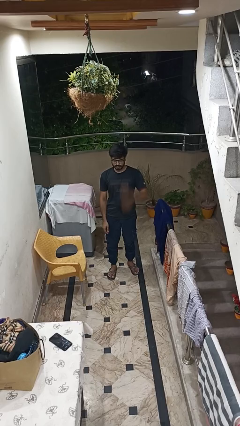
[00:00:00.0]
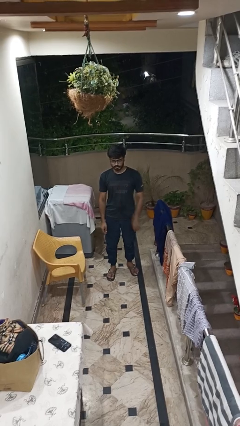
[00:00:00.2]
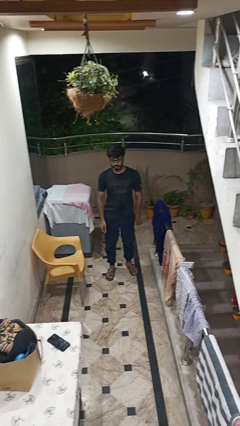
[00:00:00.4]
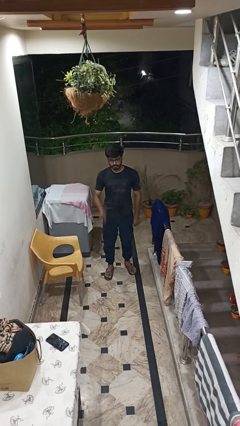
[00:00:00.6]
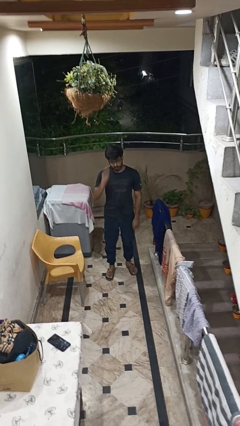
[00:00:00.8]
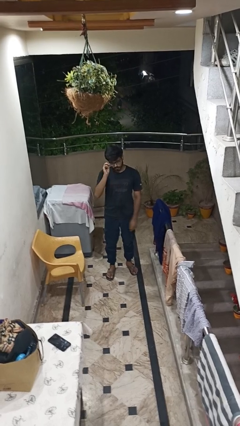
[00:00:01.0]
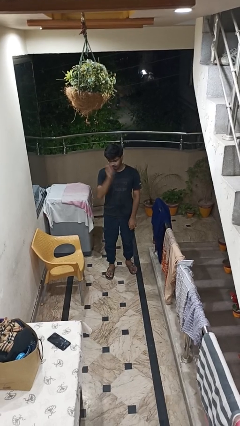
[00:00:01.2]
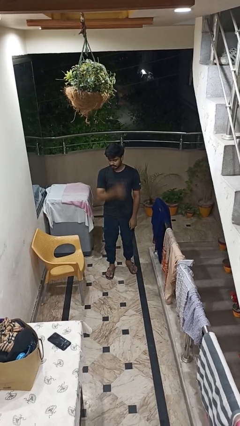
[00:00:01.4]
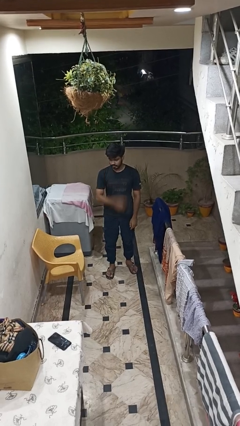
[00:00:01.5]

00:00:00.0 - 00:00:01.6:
person takes off glasses

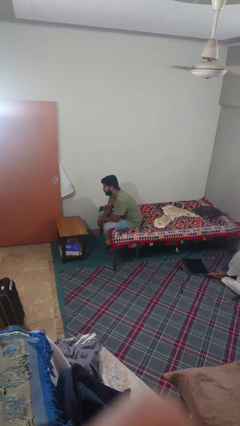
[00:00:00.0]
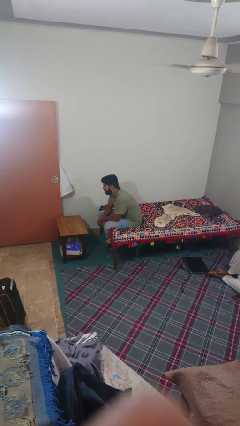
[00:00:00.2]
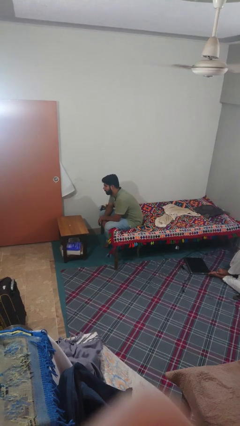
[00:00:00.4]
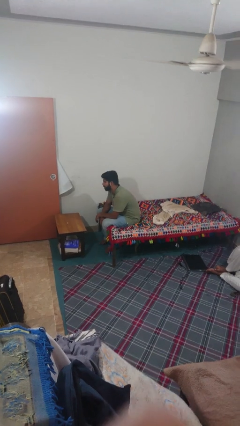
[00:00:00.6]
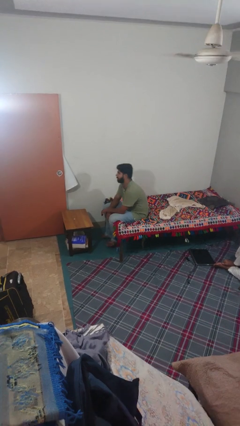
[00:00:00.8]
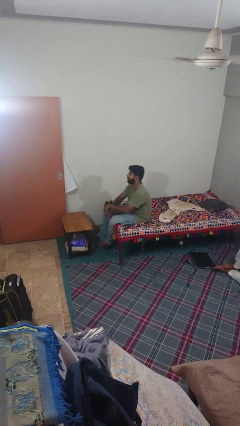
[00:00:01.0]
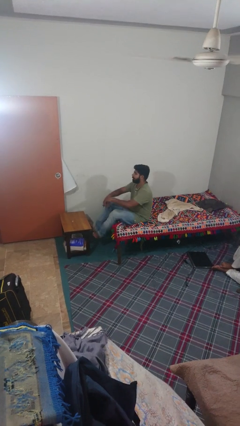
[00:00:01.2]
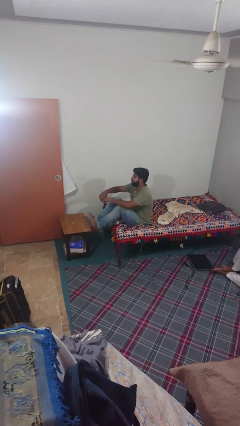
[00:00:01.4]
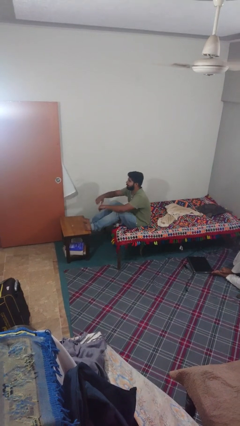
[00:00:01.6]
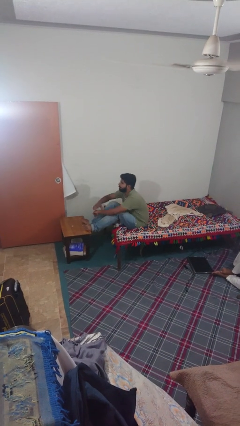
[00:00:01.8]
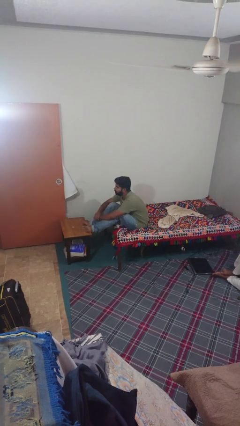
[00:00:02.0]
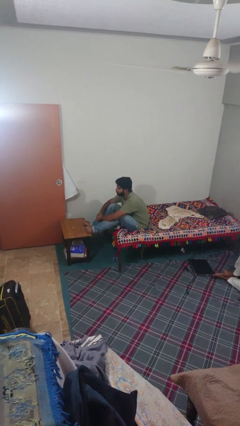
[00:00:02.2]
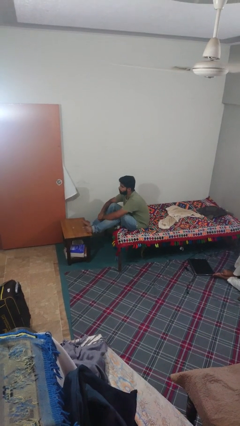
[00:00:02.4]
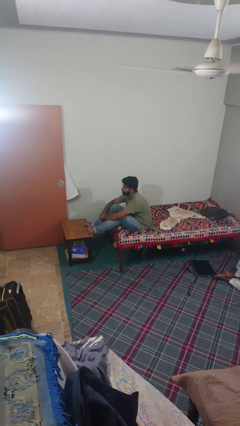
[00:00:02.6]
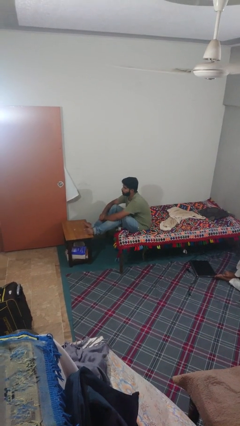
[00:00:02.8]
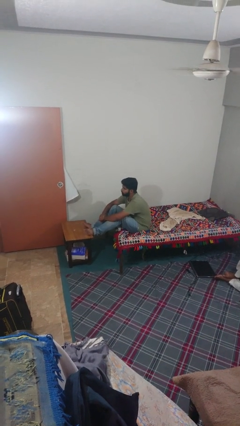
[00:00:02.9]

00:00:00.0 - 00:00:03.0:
person puts feet up

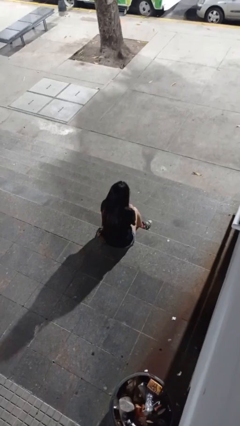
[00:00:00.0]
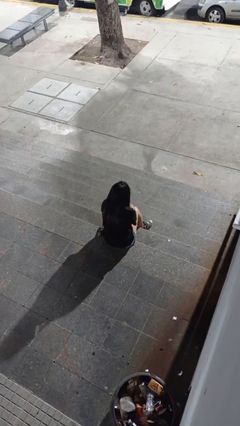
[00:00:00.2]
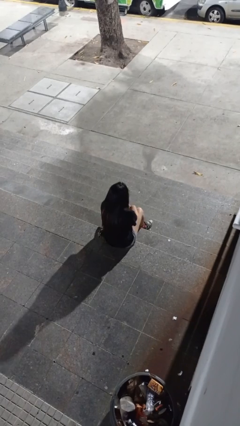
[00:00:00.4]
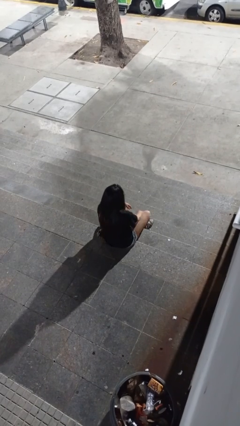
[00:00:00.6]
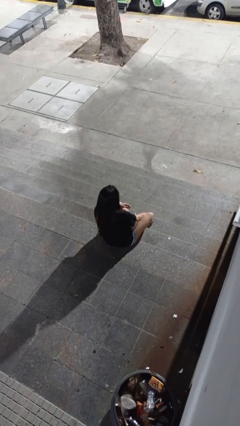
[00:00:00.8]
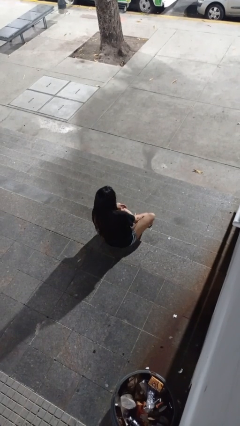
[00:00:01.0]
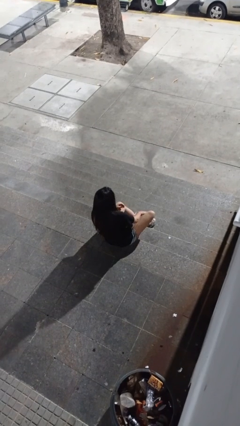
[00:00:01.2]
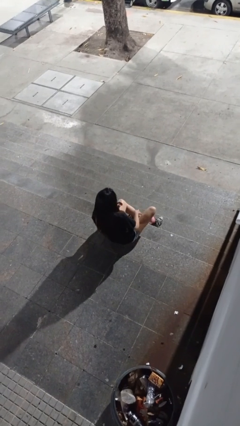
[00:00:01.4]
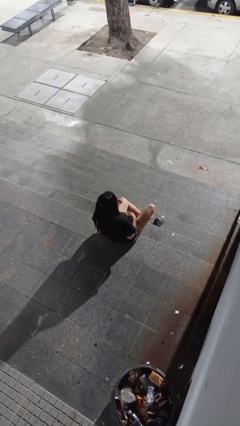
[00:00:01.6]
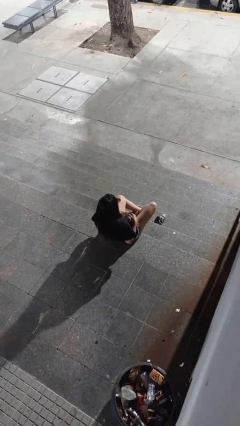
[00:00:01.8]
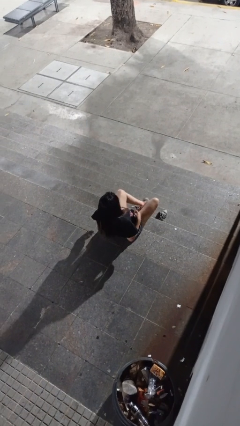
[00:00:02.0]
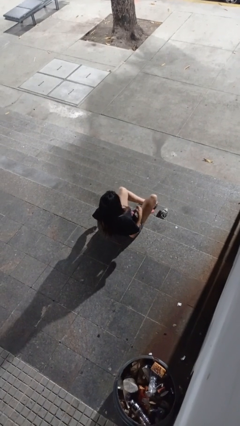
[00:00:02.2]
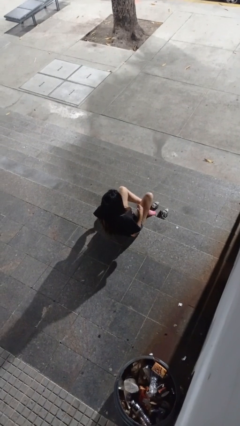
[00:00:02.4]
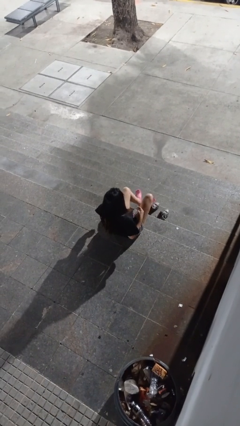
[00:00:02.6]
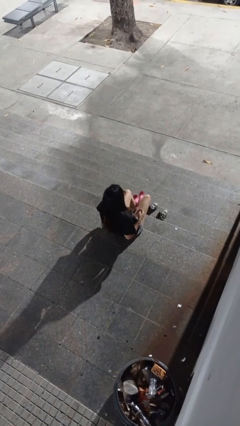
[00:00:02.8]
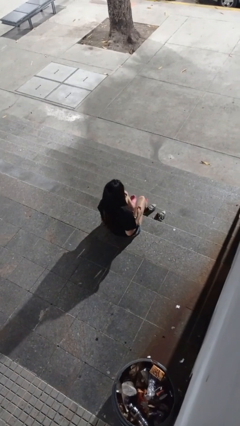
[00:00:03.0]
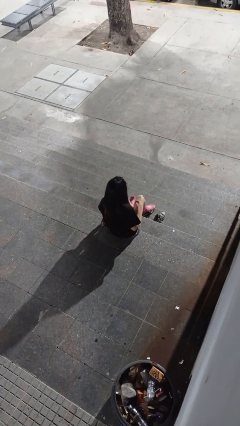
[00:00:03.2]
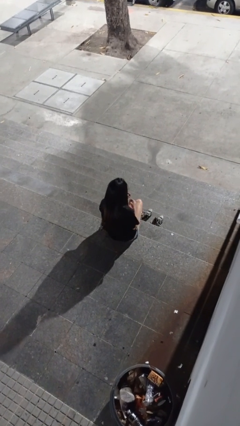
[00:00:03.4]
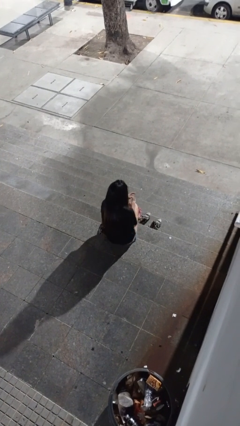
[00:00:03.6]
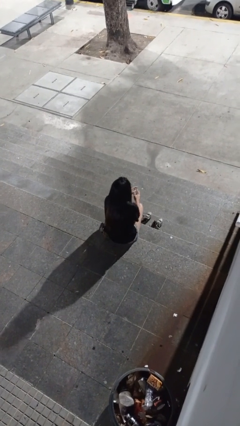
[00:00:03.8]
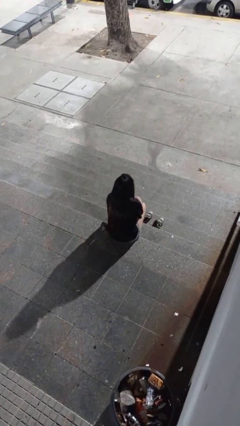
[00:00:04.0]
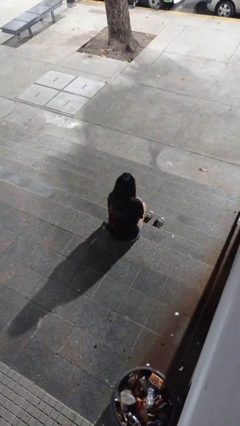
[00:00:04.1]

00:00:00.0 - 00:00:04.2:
person takes off shoes

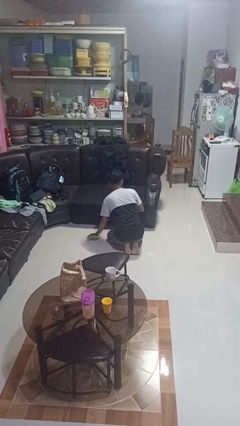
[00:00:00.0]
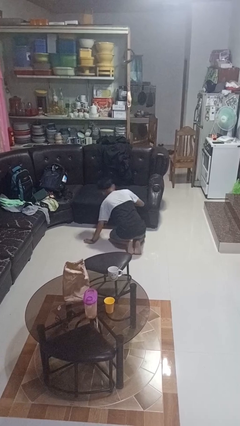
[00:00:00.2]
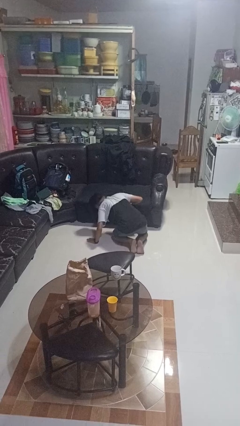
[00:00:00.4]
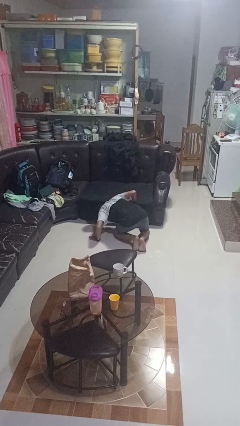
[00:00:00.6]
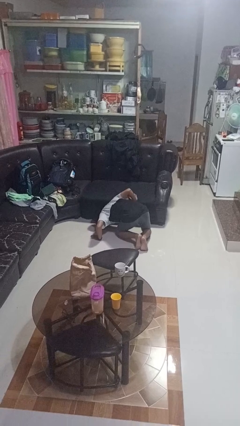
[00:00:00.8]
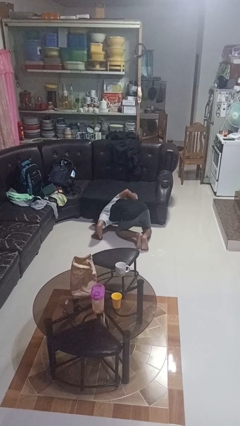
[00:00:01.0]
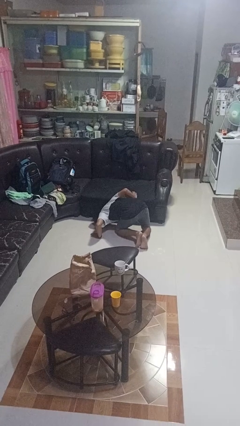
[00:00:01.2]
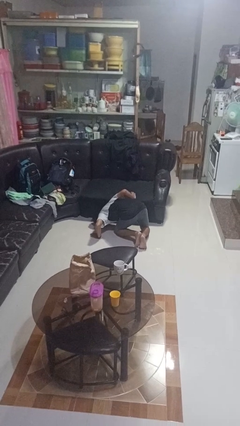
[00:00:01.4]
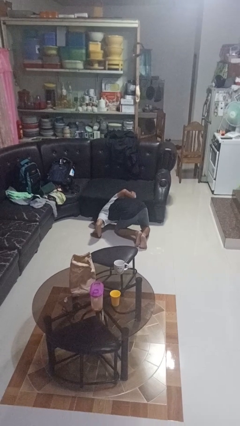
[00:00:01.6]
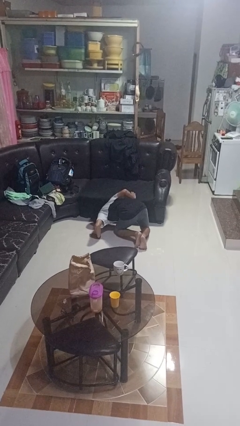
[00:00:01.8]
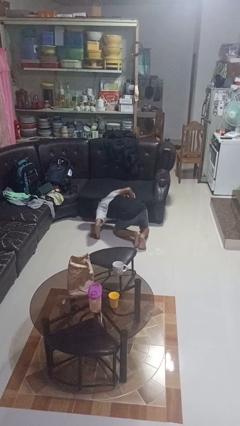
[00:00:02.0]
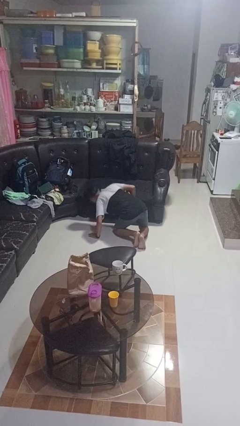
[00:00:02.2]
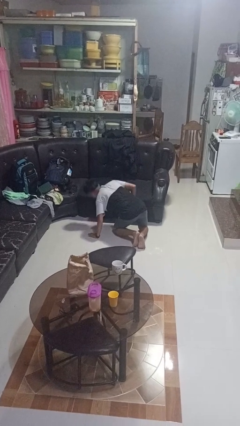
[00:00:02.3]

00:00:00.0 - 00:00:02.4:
person searches under couch

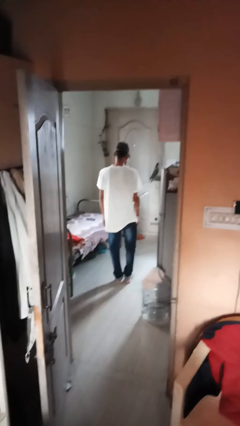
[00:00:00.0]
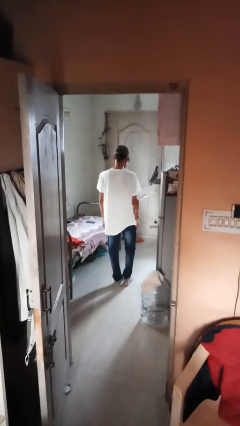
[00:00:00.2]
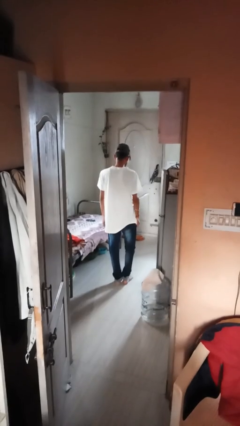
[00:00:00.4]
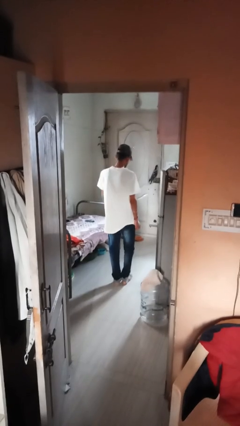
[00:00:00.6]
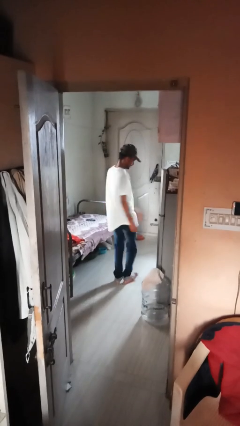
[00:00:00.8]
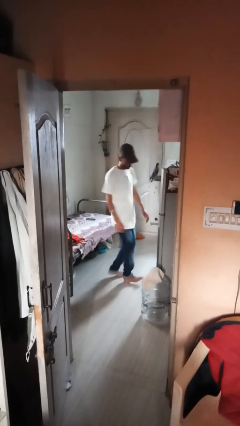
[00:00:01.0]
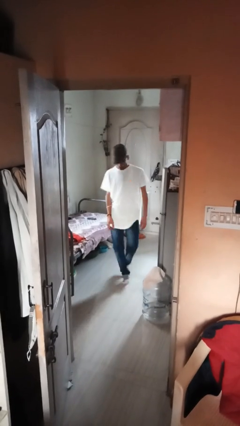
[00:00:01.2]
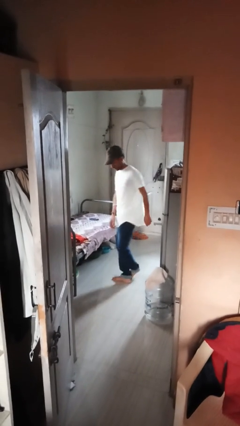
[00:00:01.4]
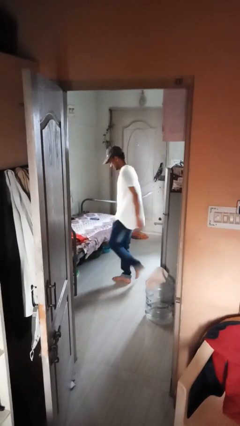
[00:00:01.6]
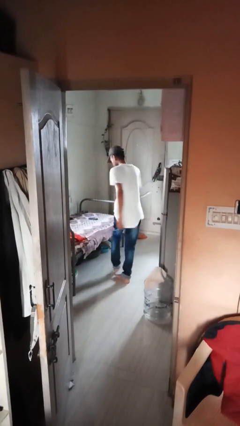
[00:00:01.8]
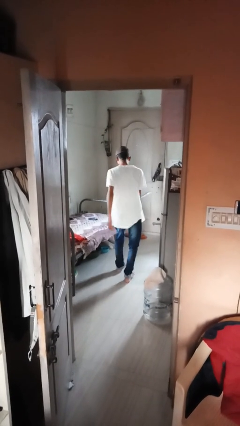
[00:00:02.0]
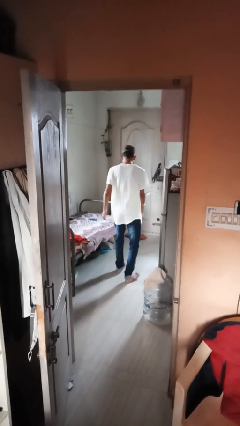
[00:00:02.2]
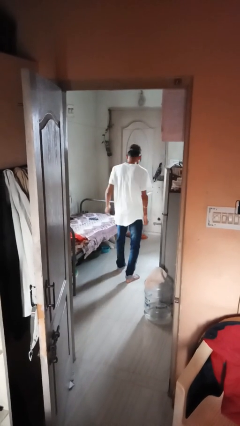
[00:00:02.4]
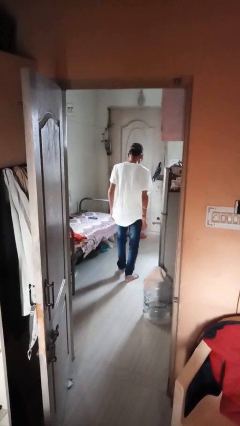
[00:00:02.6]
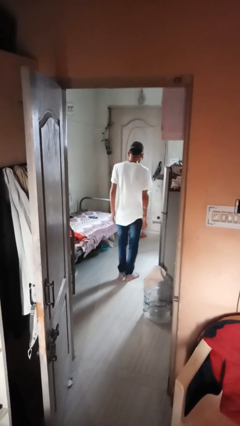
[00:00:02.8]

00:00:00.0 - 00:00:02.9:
person twirls

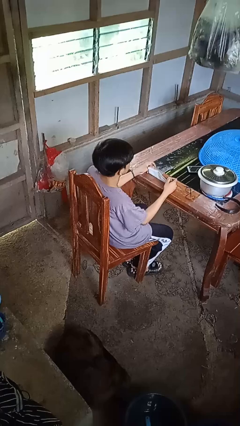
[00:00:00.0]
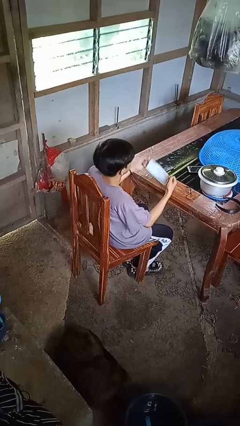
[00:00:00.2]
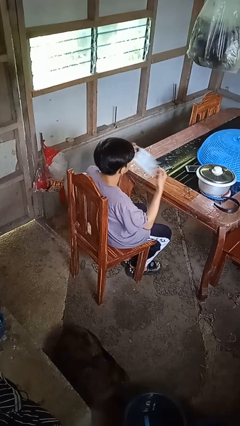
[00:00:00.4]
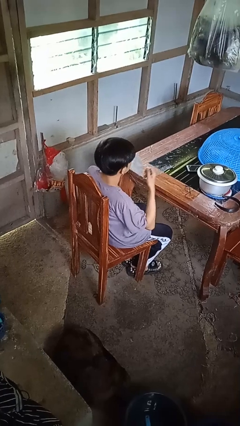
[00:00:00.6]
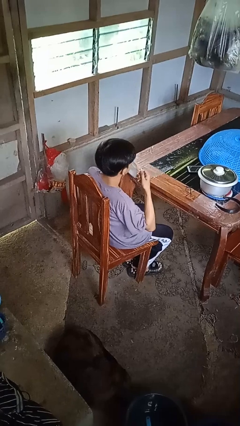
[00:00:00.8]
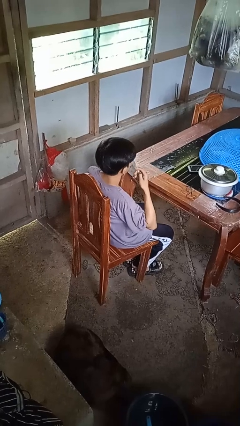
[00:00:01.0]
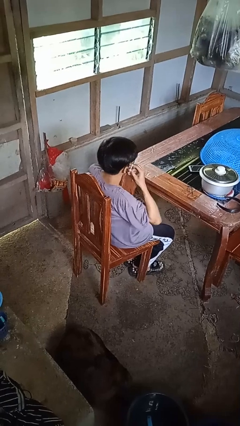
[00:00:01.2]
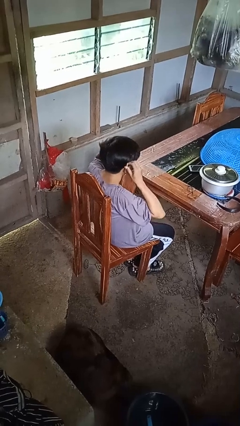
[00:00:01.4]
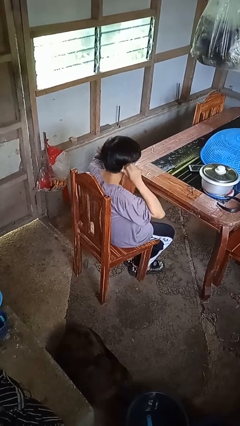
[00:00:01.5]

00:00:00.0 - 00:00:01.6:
person puts on facemask

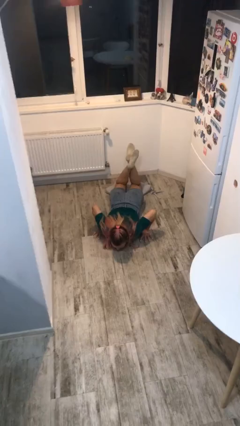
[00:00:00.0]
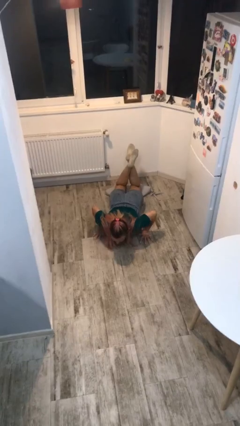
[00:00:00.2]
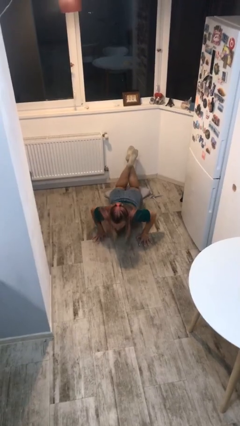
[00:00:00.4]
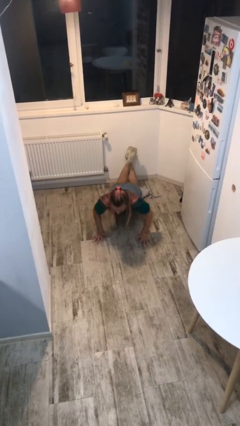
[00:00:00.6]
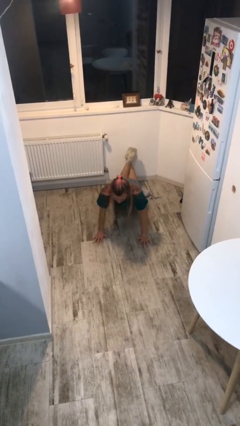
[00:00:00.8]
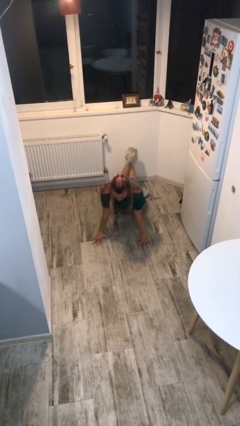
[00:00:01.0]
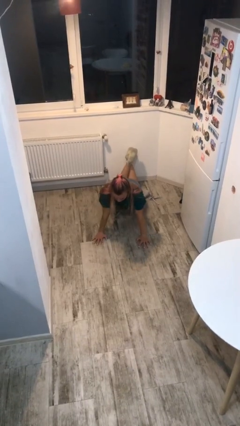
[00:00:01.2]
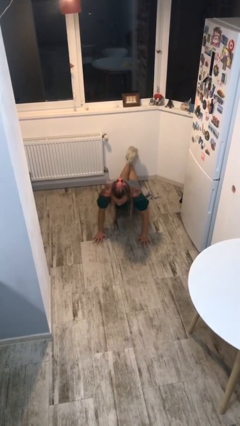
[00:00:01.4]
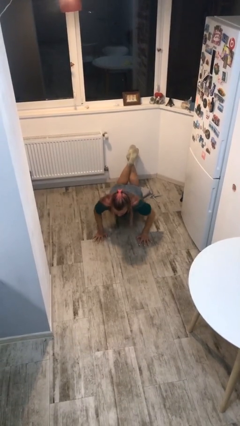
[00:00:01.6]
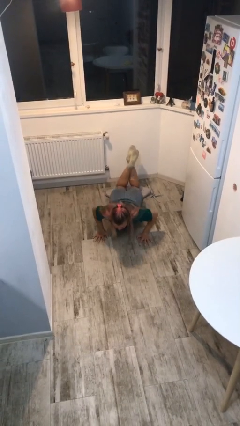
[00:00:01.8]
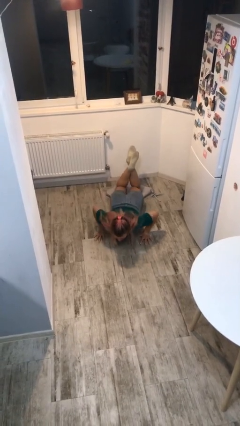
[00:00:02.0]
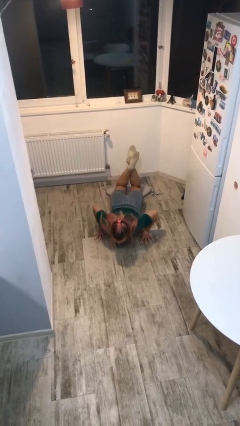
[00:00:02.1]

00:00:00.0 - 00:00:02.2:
person exercises with pushup
